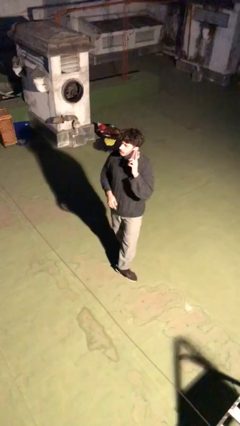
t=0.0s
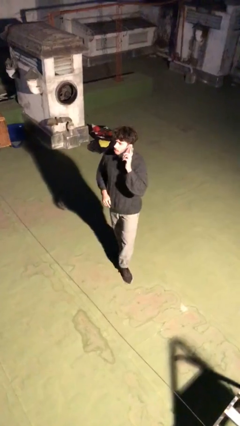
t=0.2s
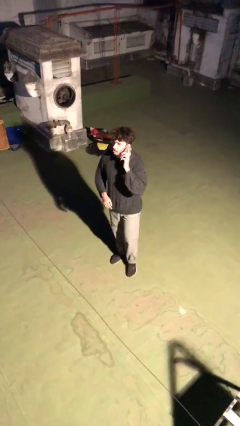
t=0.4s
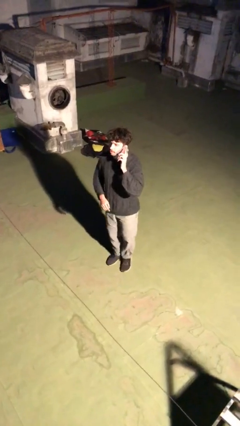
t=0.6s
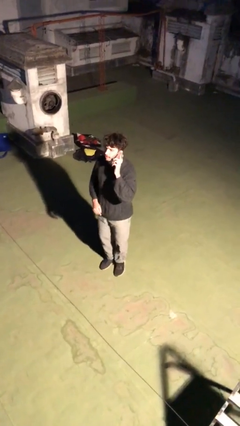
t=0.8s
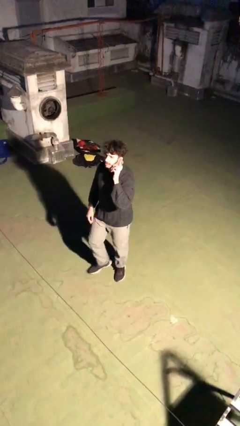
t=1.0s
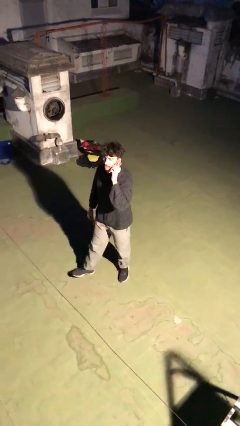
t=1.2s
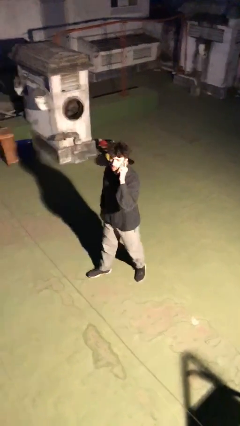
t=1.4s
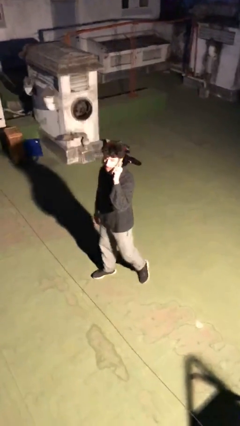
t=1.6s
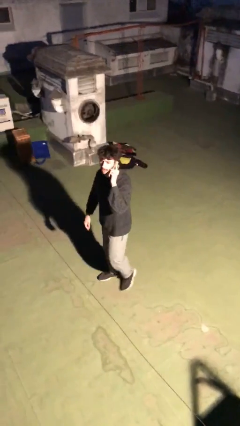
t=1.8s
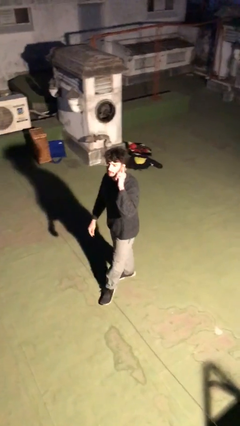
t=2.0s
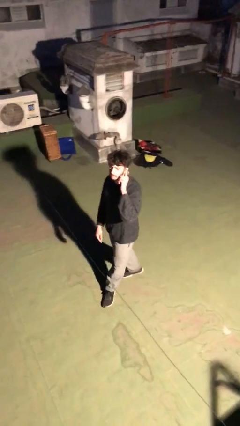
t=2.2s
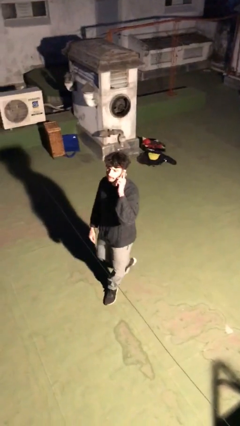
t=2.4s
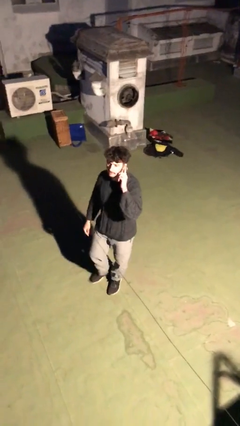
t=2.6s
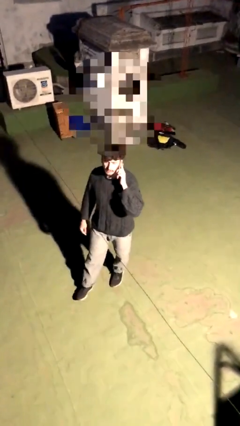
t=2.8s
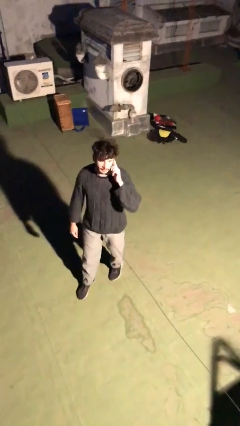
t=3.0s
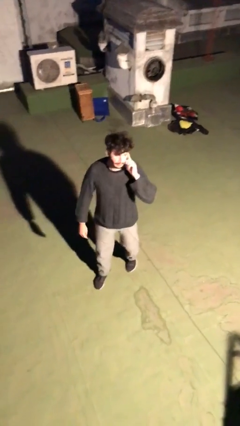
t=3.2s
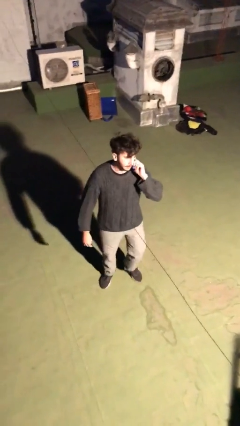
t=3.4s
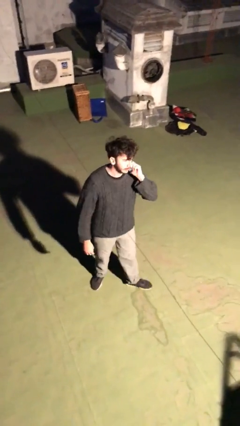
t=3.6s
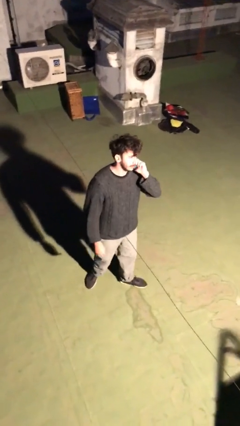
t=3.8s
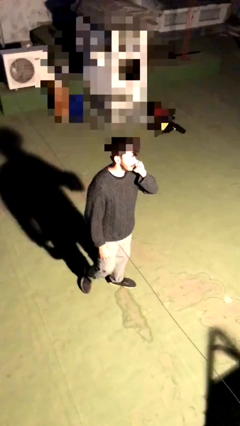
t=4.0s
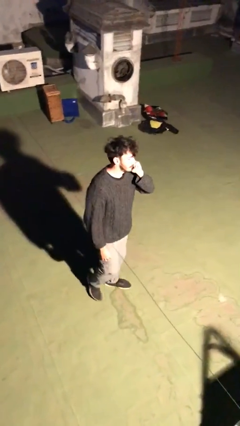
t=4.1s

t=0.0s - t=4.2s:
person talks on phone

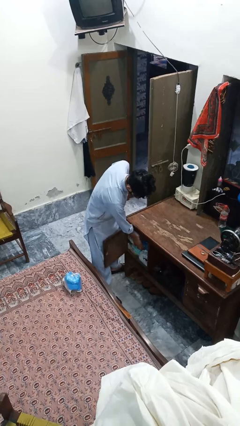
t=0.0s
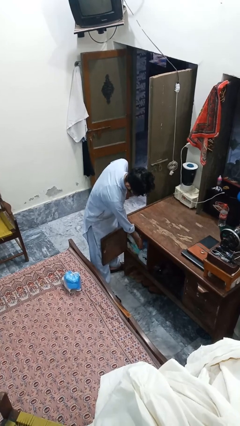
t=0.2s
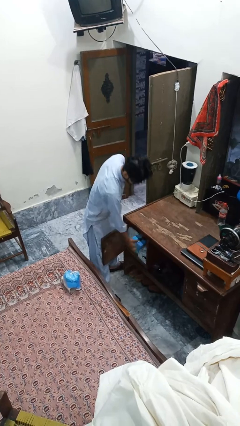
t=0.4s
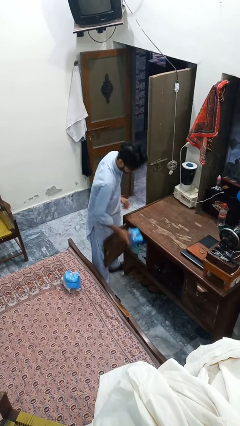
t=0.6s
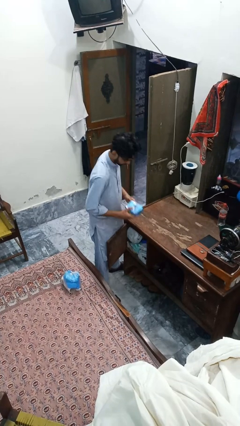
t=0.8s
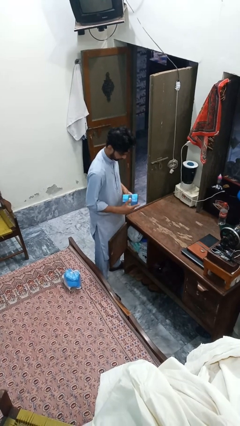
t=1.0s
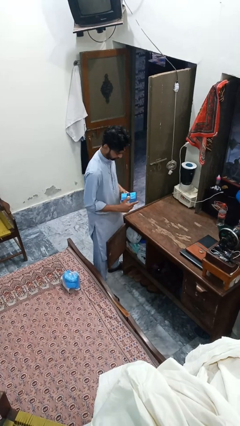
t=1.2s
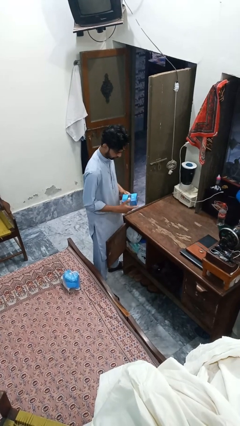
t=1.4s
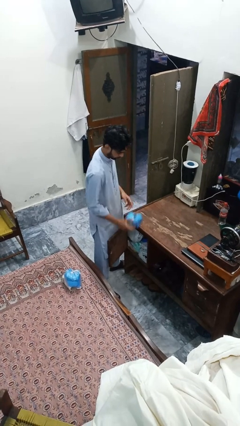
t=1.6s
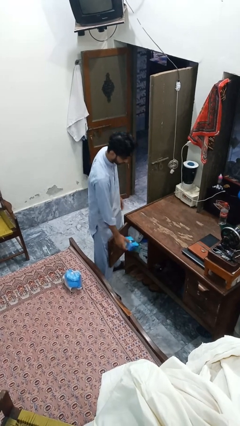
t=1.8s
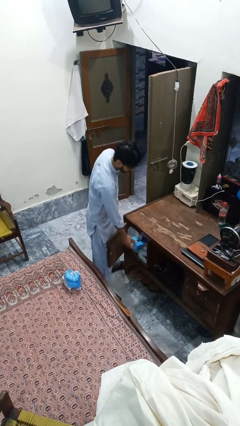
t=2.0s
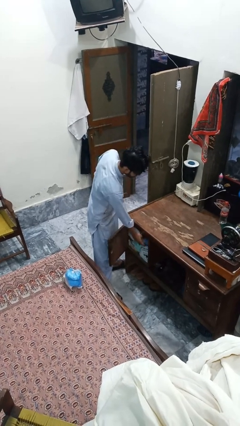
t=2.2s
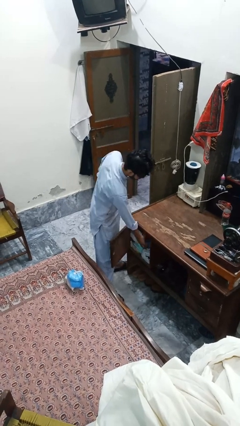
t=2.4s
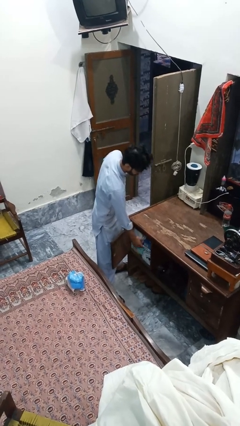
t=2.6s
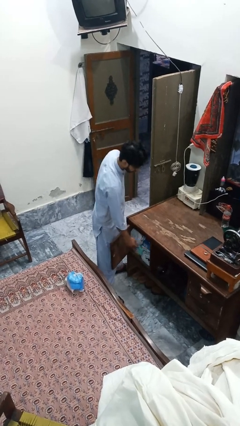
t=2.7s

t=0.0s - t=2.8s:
person puts down object into cabinet

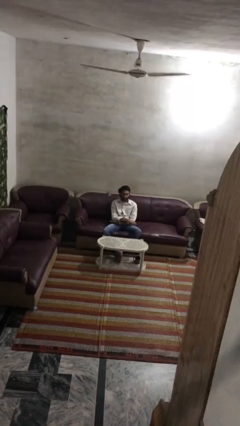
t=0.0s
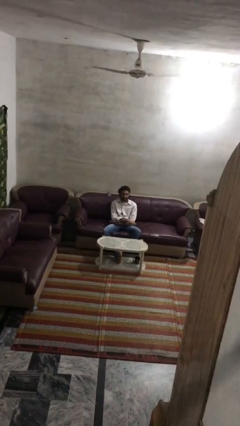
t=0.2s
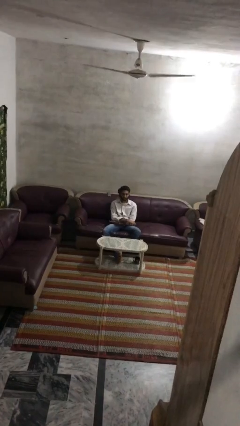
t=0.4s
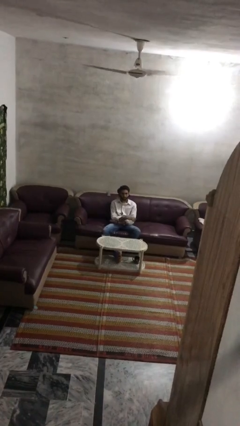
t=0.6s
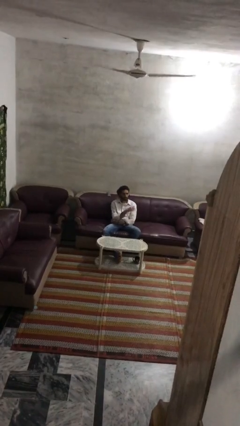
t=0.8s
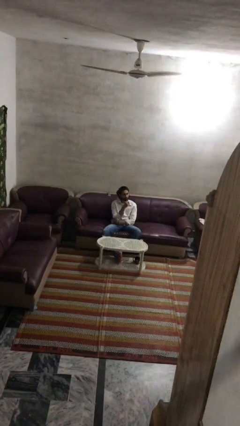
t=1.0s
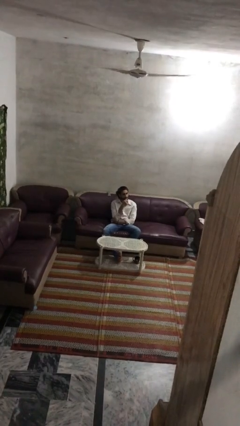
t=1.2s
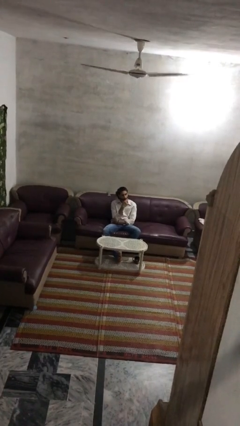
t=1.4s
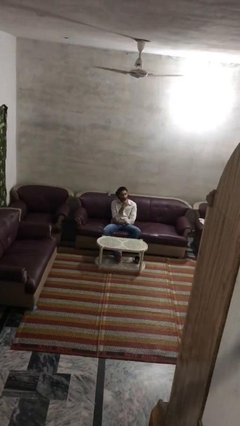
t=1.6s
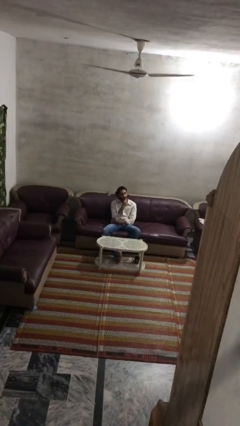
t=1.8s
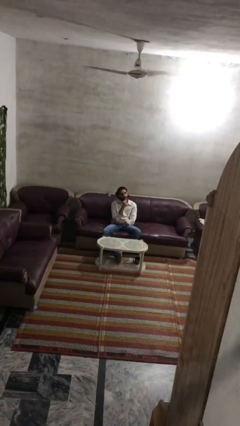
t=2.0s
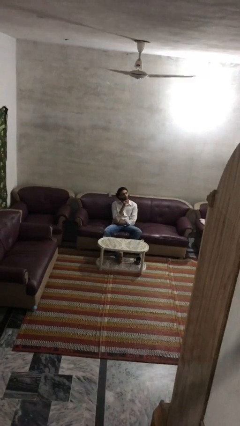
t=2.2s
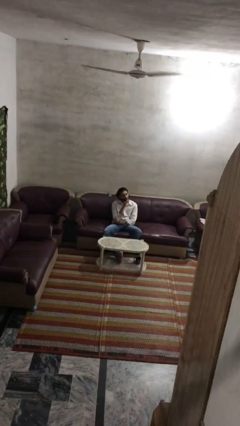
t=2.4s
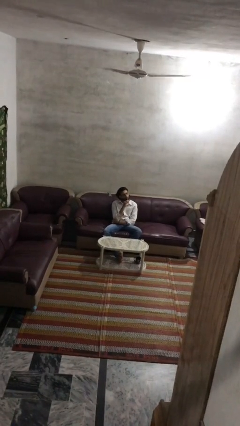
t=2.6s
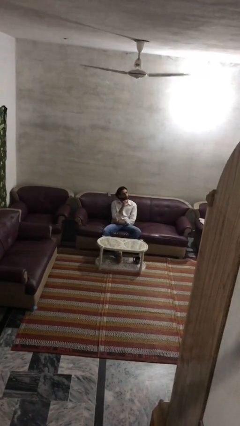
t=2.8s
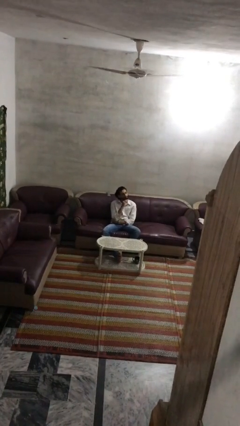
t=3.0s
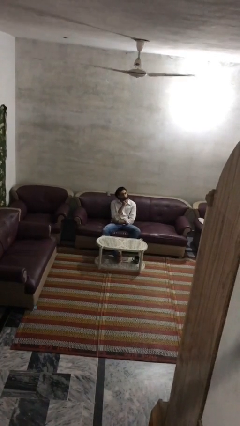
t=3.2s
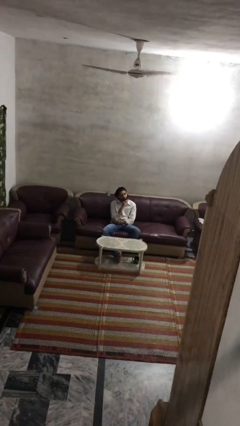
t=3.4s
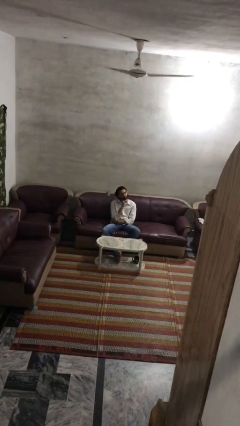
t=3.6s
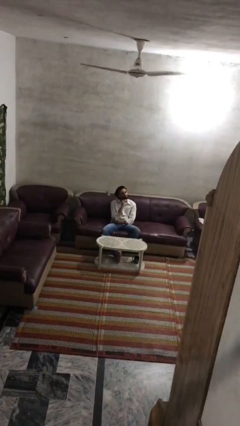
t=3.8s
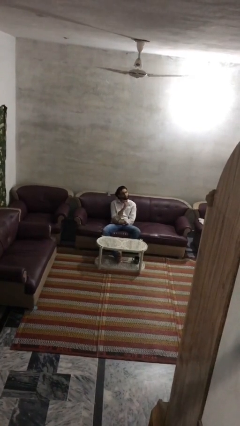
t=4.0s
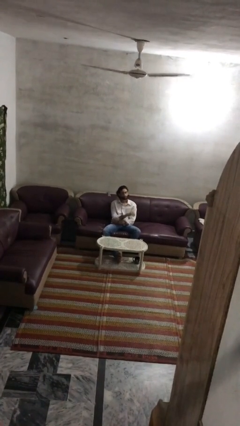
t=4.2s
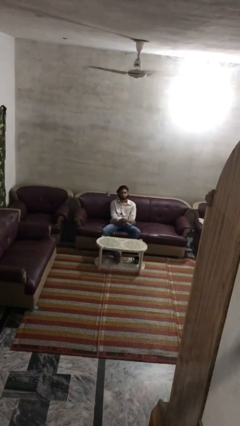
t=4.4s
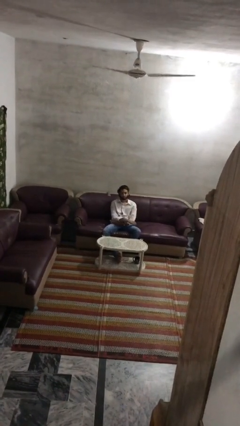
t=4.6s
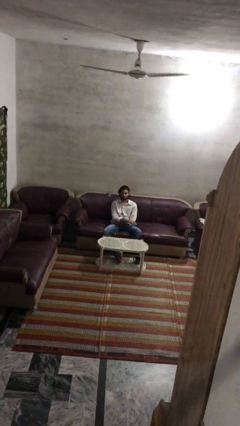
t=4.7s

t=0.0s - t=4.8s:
person strokes chin

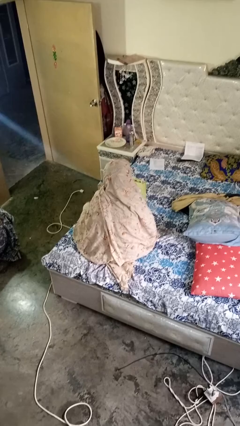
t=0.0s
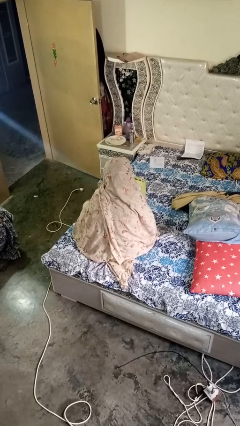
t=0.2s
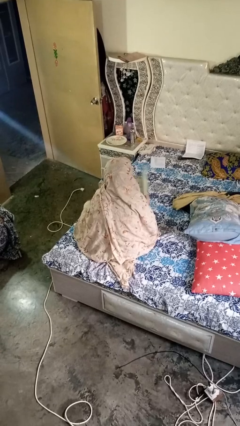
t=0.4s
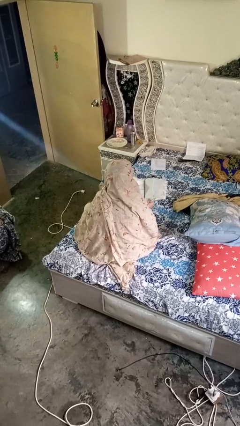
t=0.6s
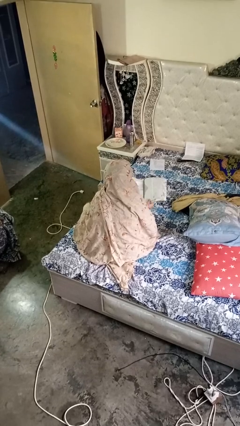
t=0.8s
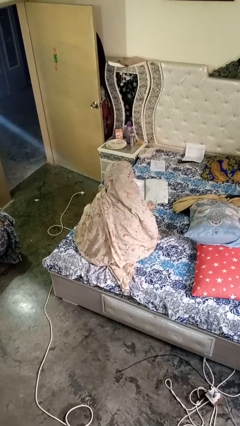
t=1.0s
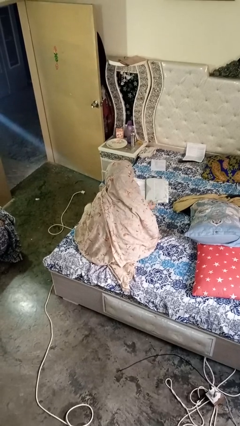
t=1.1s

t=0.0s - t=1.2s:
person reads magazine

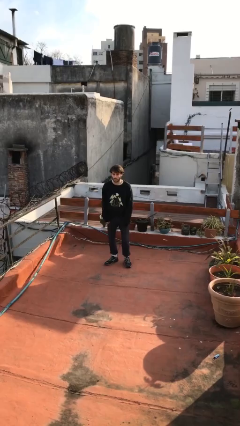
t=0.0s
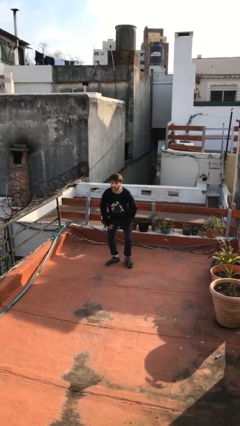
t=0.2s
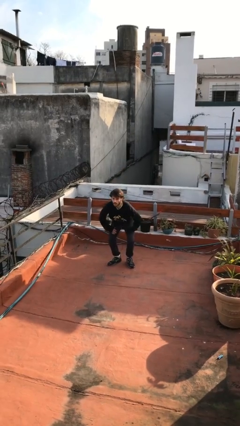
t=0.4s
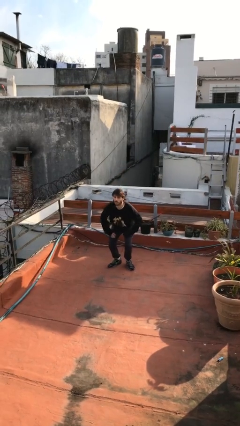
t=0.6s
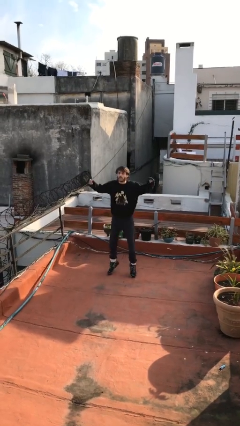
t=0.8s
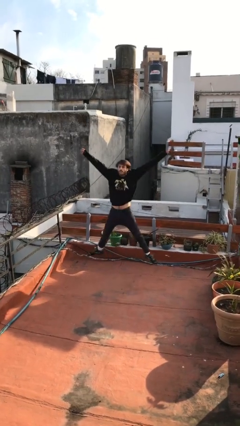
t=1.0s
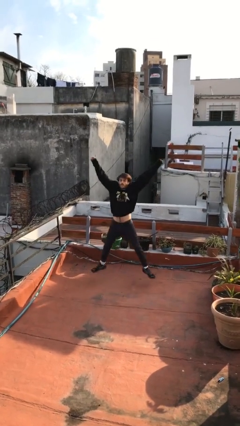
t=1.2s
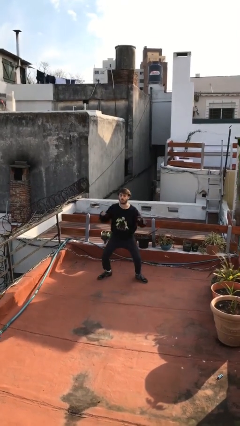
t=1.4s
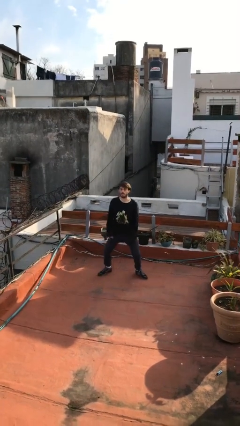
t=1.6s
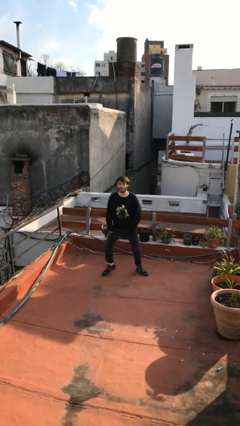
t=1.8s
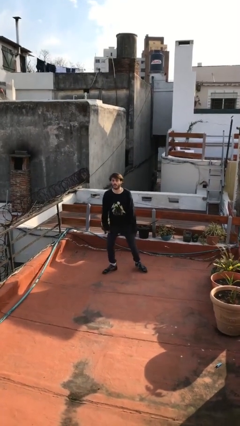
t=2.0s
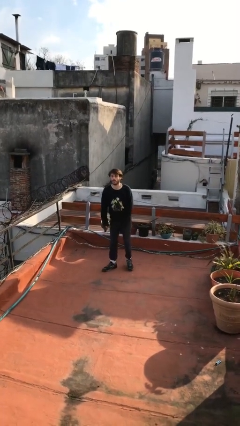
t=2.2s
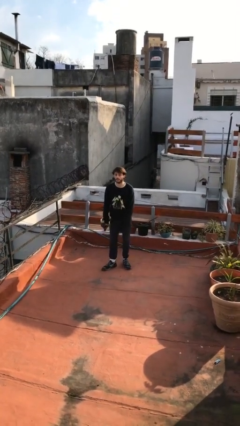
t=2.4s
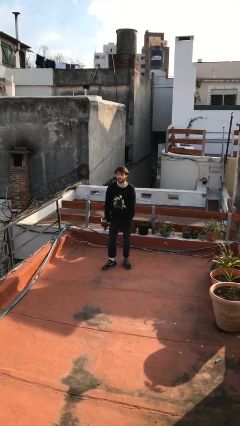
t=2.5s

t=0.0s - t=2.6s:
person exercises with jumping jacks

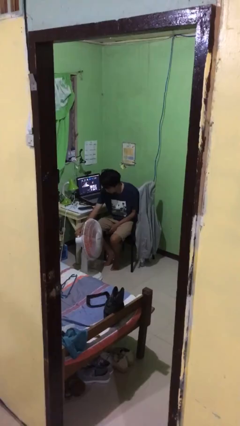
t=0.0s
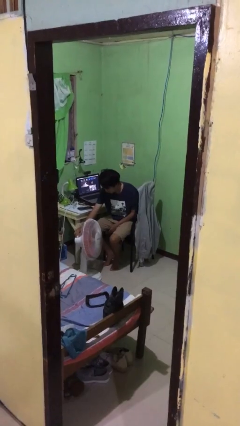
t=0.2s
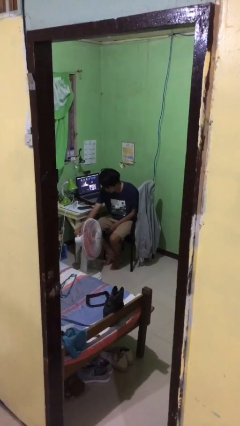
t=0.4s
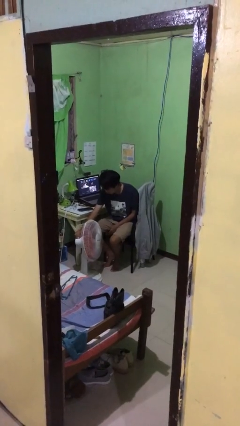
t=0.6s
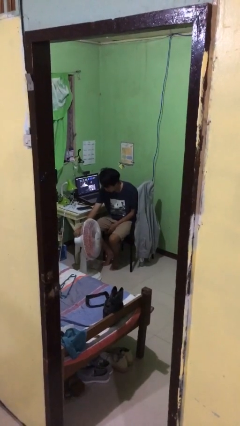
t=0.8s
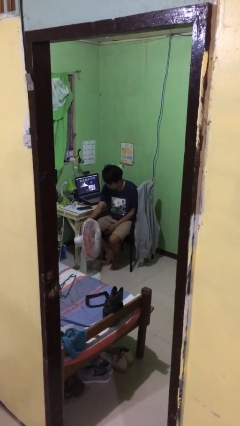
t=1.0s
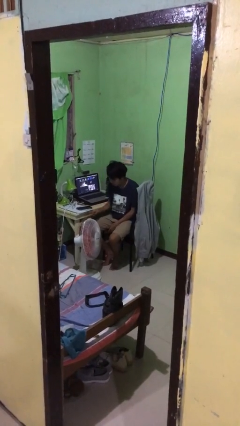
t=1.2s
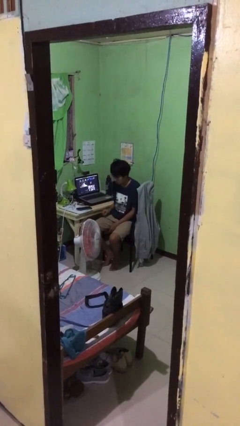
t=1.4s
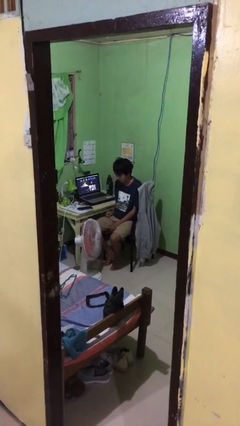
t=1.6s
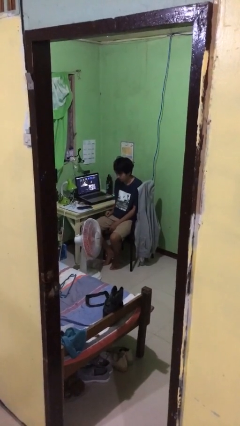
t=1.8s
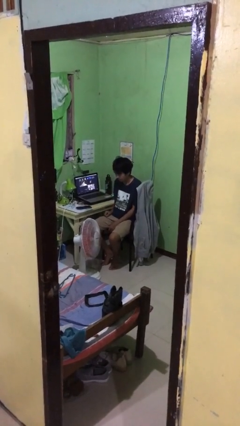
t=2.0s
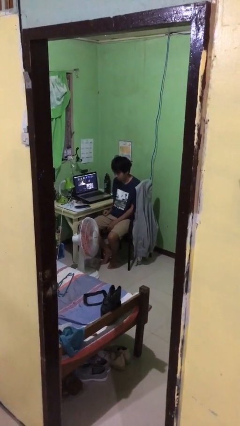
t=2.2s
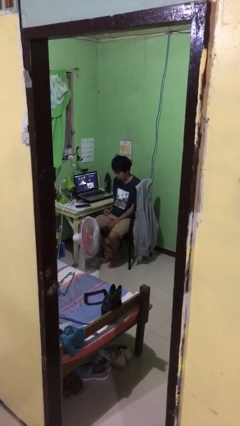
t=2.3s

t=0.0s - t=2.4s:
person turns off fan
